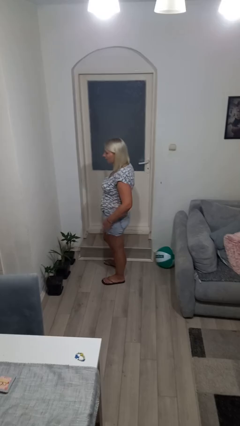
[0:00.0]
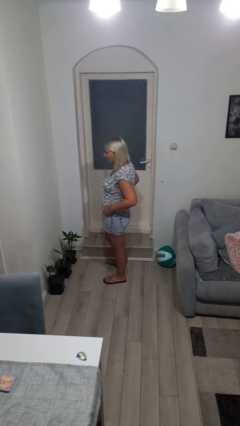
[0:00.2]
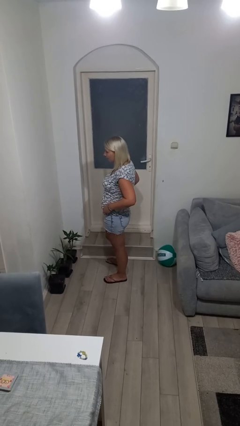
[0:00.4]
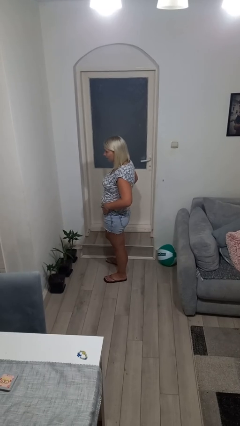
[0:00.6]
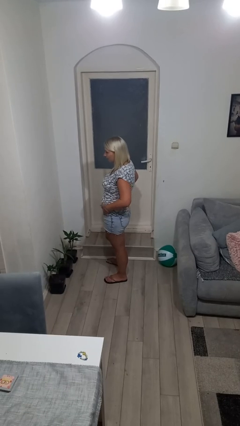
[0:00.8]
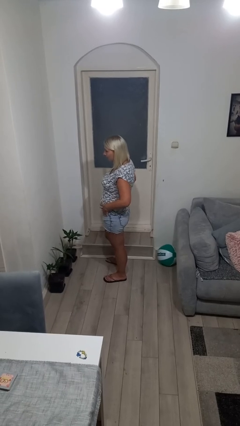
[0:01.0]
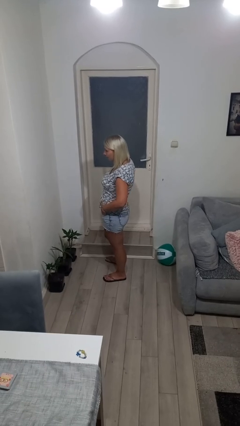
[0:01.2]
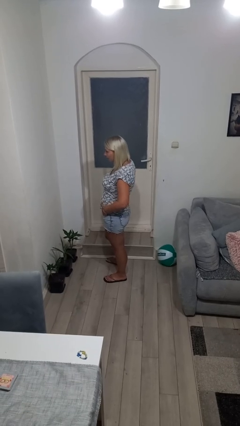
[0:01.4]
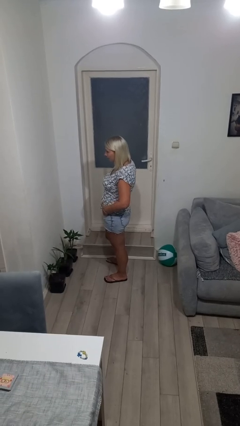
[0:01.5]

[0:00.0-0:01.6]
person puts hands in back pockets

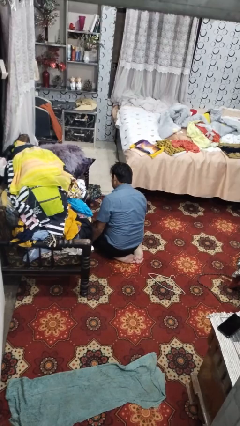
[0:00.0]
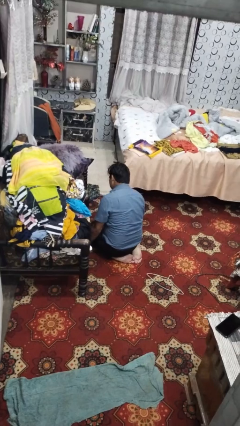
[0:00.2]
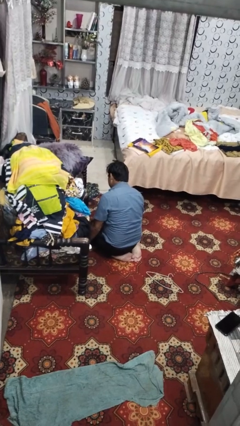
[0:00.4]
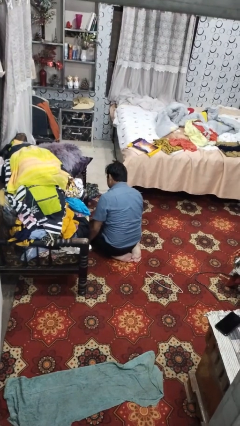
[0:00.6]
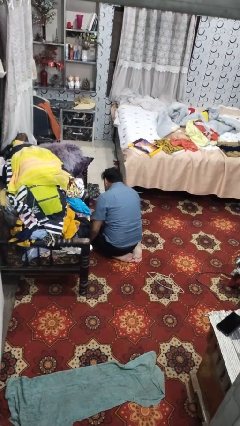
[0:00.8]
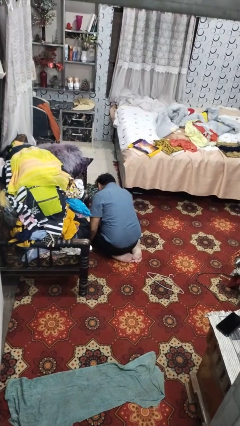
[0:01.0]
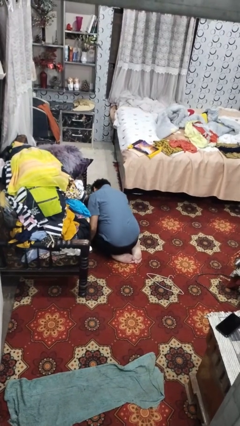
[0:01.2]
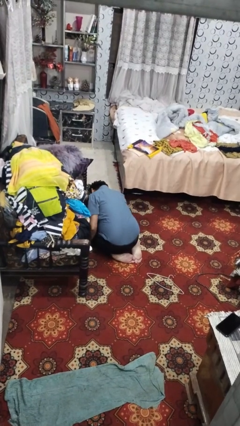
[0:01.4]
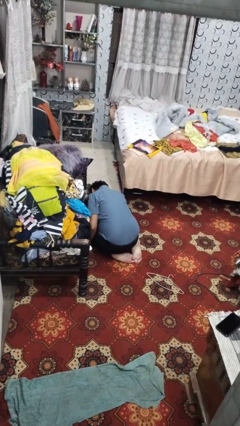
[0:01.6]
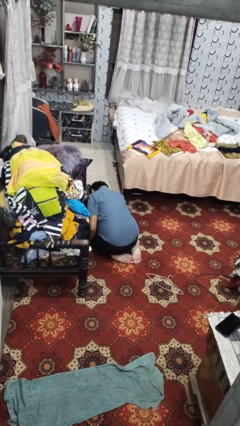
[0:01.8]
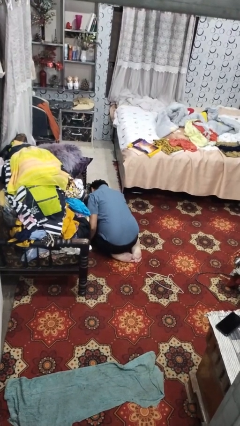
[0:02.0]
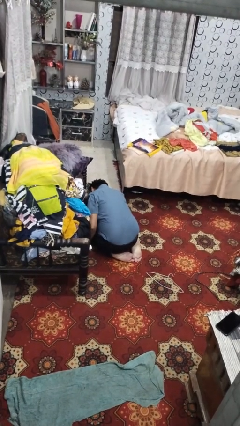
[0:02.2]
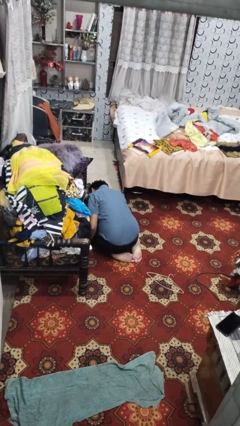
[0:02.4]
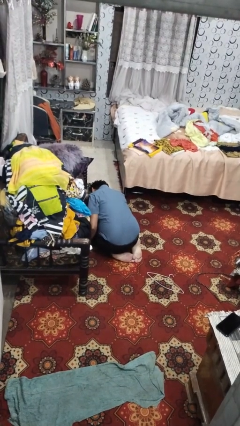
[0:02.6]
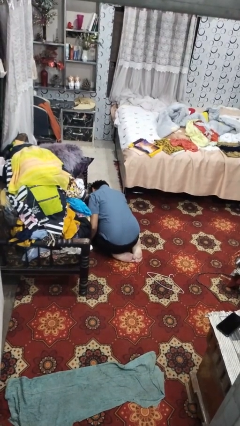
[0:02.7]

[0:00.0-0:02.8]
person searches under couch

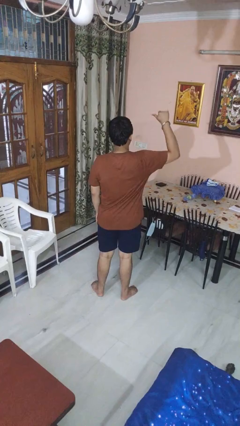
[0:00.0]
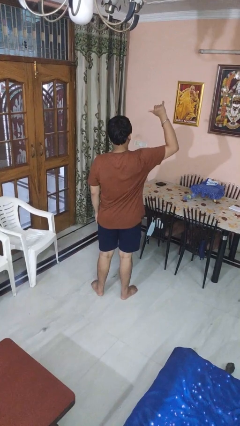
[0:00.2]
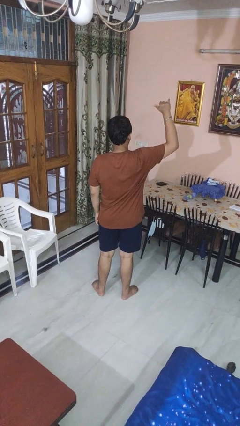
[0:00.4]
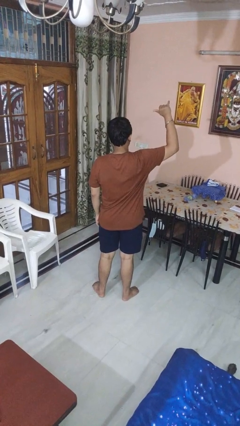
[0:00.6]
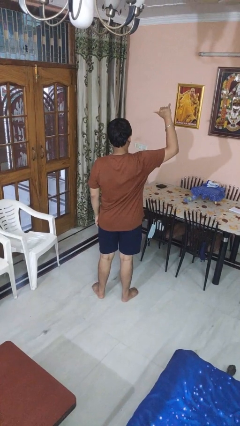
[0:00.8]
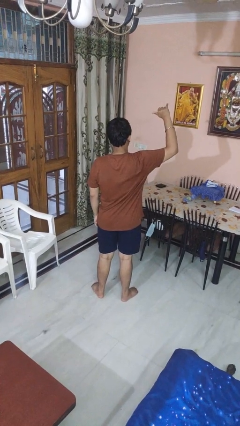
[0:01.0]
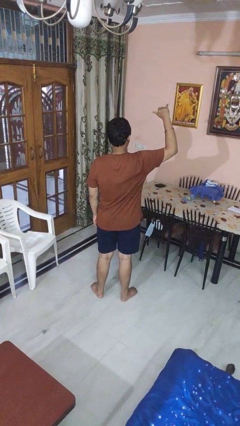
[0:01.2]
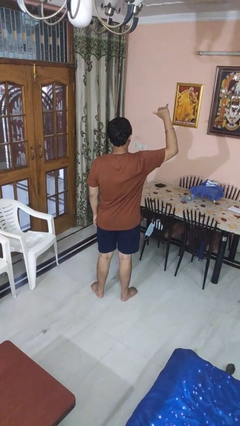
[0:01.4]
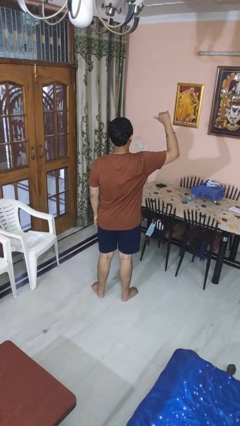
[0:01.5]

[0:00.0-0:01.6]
person gestures hang loose

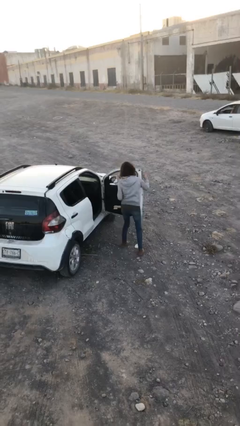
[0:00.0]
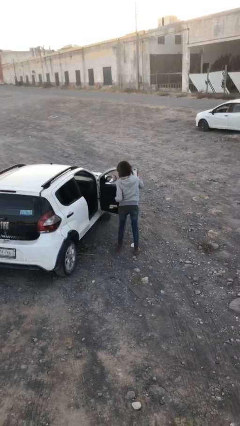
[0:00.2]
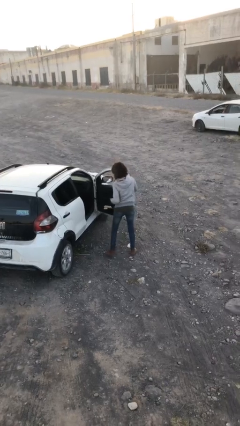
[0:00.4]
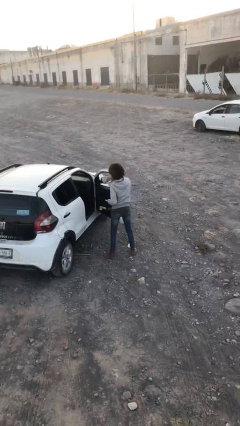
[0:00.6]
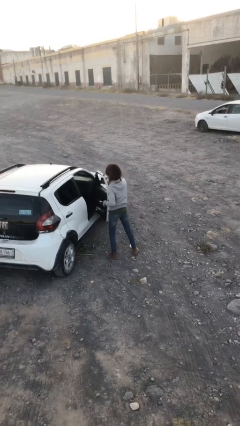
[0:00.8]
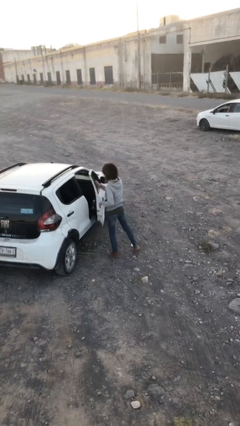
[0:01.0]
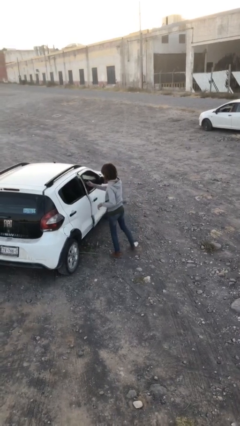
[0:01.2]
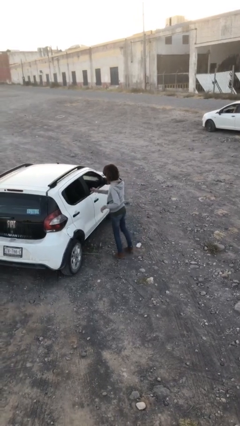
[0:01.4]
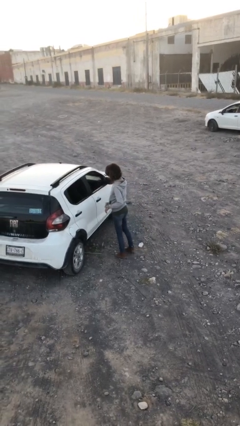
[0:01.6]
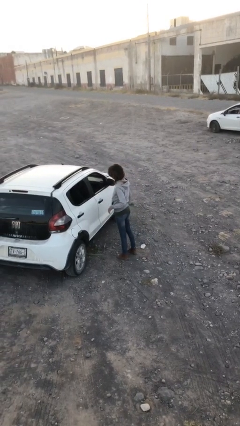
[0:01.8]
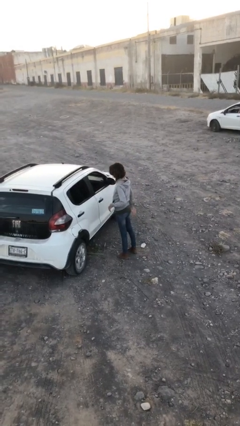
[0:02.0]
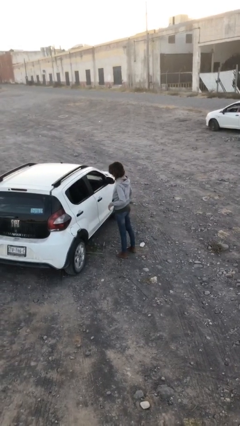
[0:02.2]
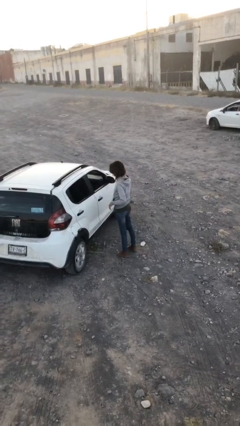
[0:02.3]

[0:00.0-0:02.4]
person closes car door

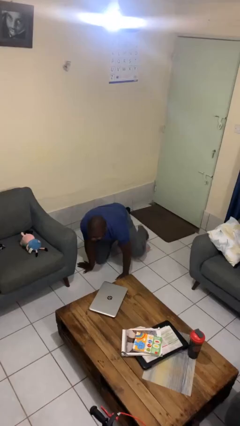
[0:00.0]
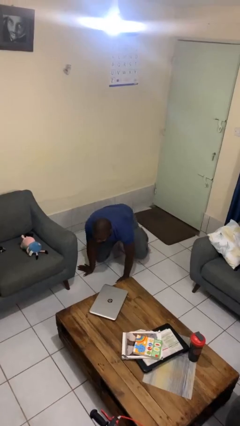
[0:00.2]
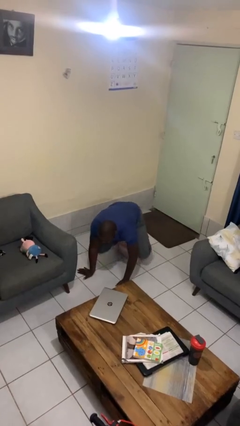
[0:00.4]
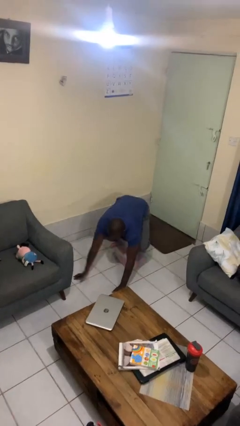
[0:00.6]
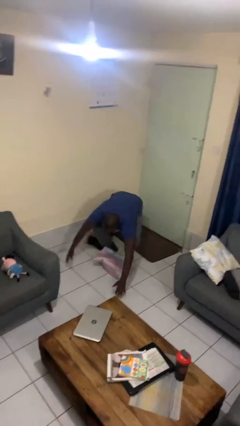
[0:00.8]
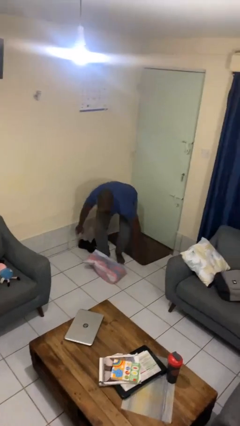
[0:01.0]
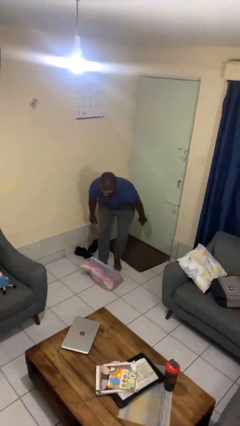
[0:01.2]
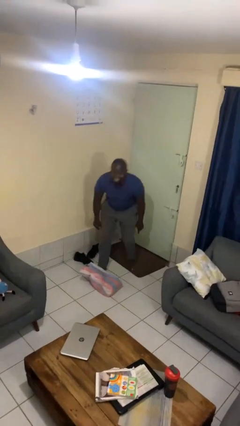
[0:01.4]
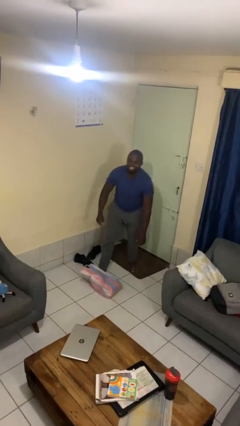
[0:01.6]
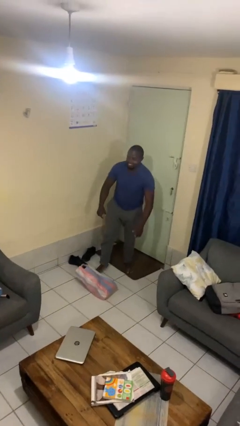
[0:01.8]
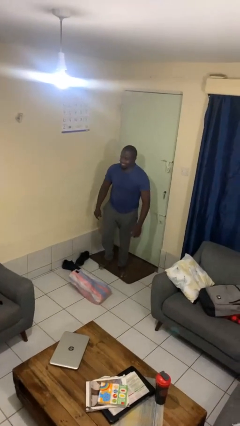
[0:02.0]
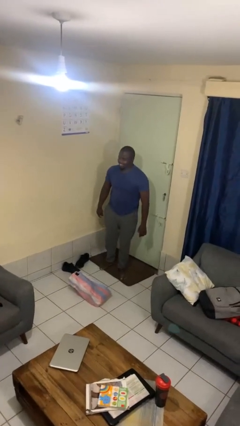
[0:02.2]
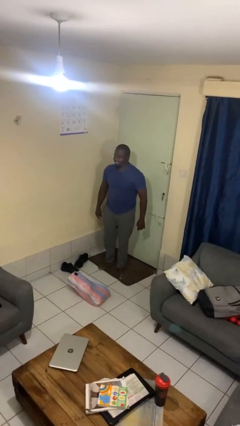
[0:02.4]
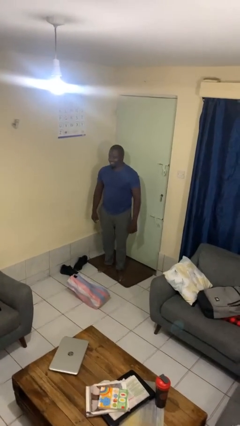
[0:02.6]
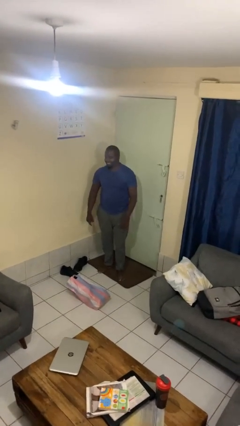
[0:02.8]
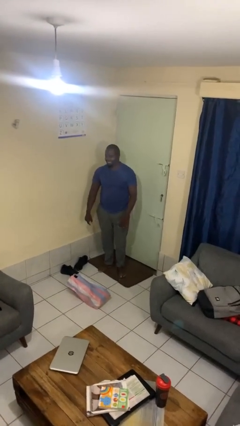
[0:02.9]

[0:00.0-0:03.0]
person stands up from floor

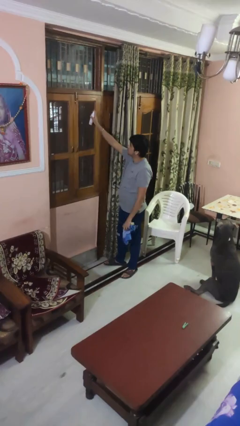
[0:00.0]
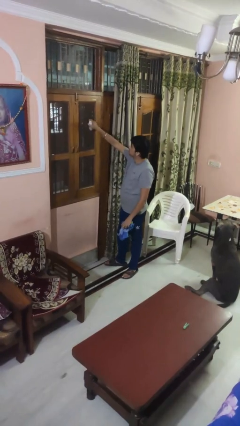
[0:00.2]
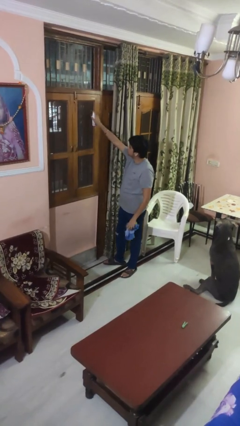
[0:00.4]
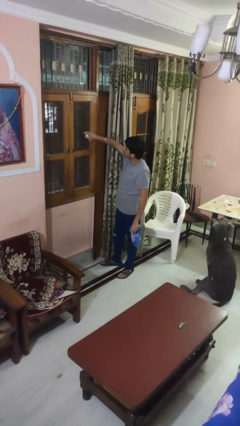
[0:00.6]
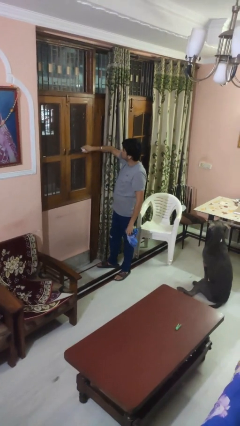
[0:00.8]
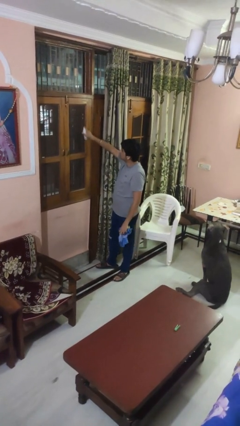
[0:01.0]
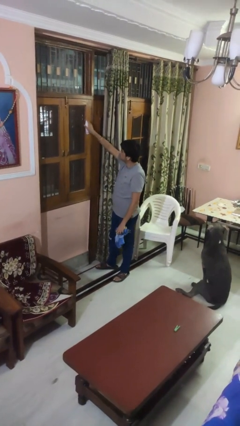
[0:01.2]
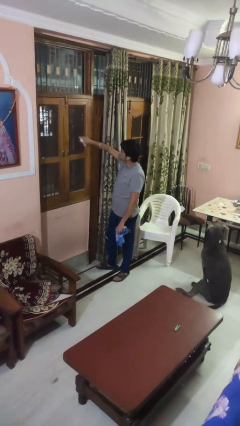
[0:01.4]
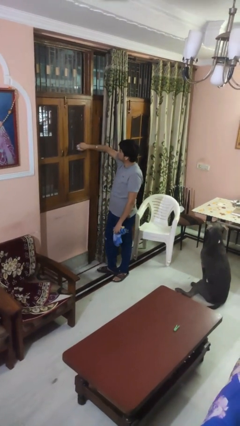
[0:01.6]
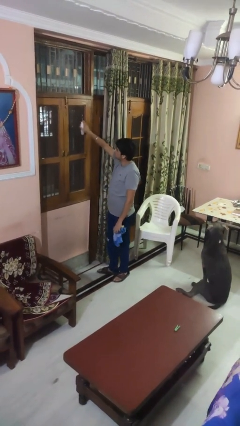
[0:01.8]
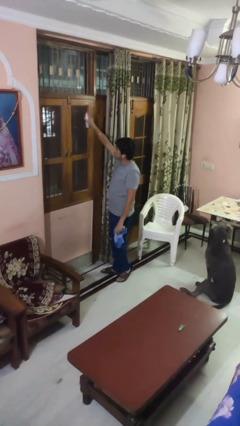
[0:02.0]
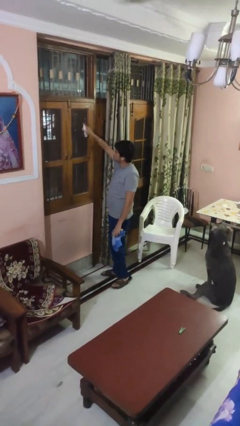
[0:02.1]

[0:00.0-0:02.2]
person sprays from bottle

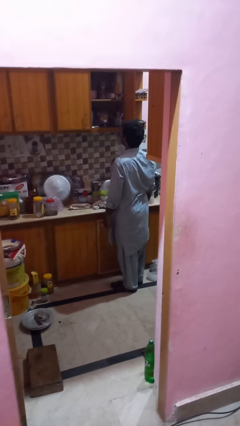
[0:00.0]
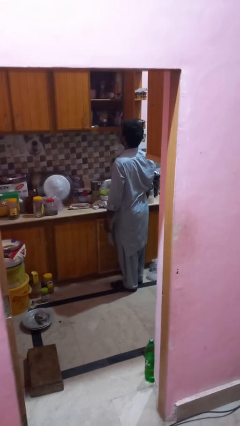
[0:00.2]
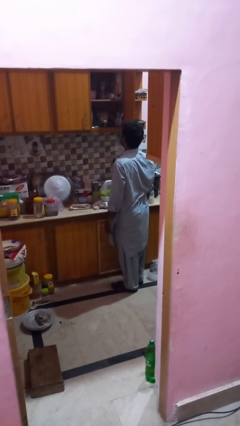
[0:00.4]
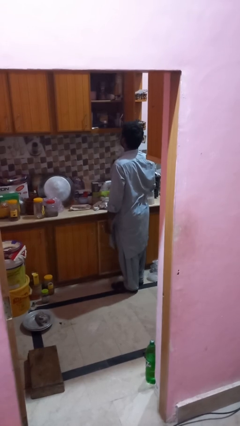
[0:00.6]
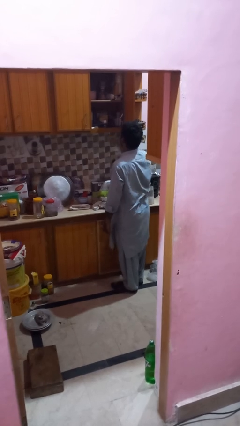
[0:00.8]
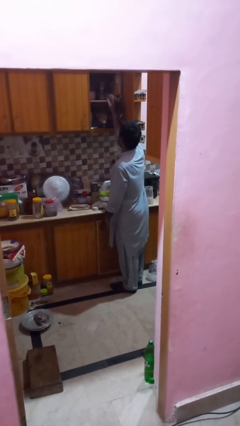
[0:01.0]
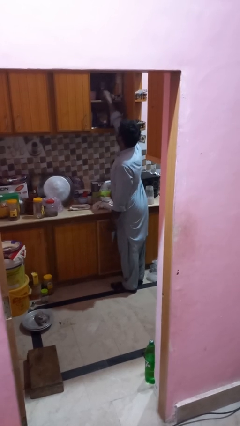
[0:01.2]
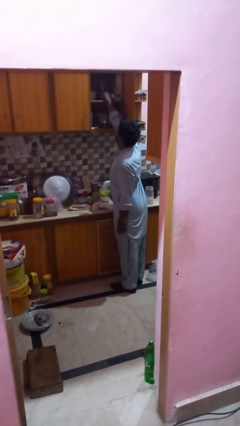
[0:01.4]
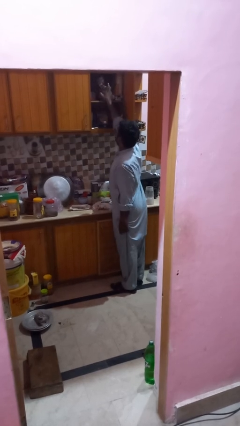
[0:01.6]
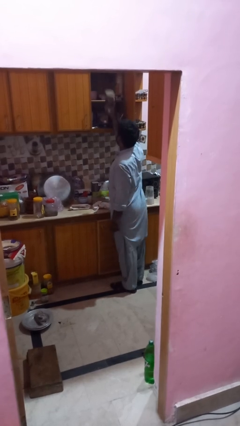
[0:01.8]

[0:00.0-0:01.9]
person takes object from cabinet

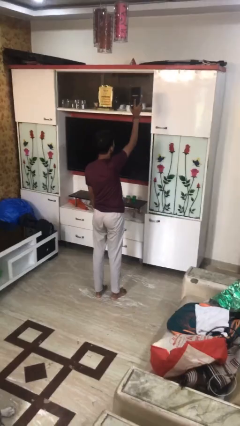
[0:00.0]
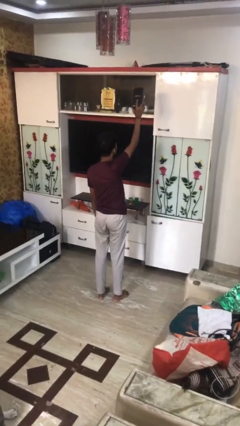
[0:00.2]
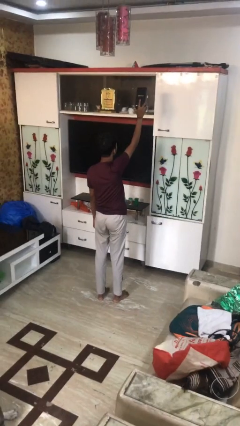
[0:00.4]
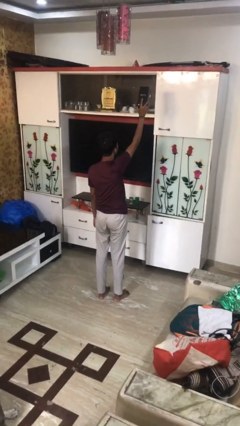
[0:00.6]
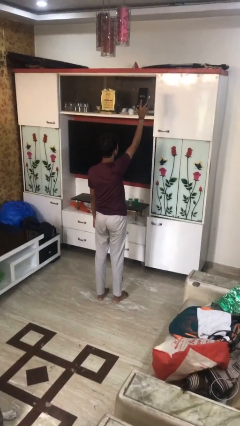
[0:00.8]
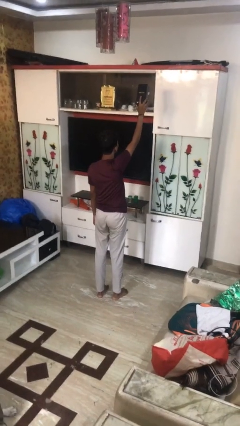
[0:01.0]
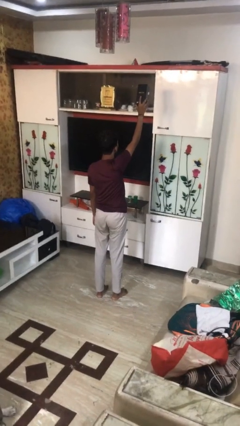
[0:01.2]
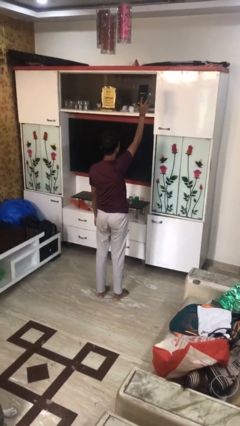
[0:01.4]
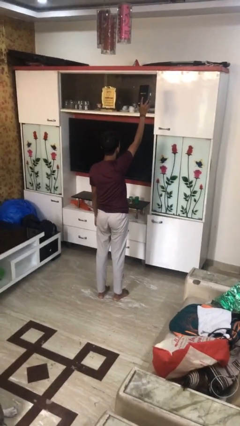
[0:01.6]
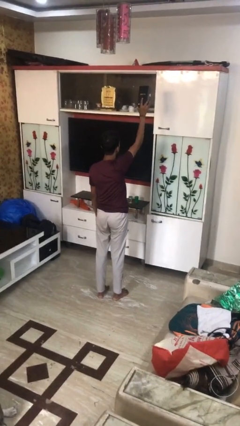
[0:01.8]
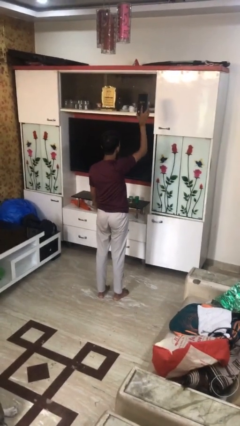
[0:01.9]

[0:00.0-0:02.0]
person holds object above head
